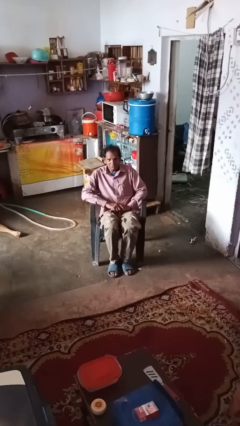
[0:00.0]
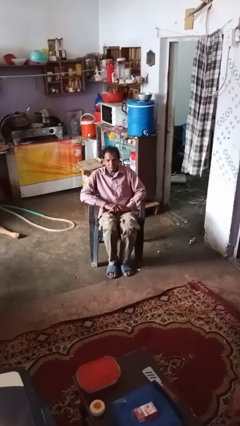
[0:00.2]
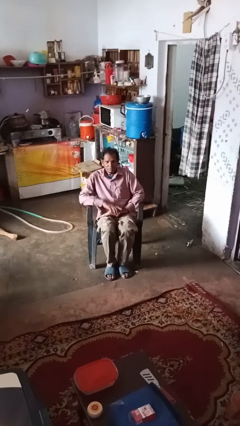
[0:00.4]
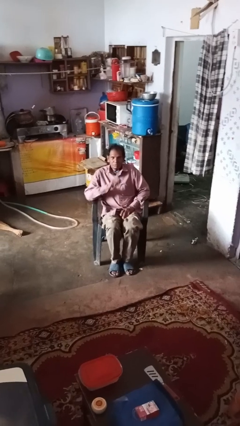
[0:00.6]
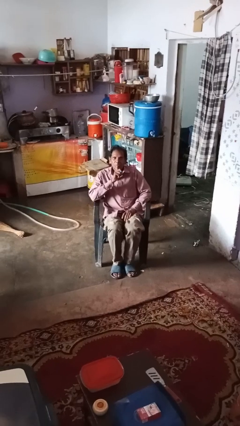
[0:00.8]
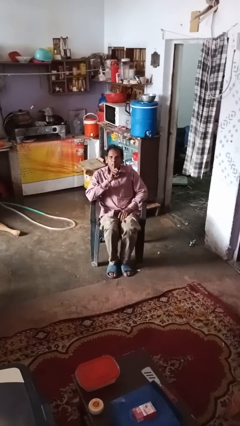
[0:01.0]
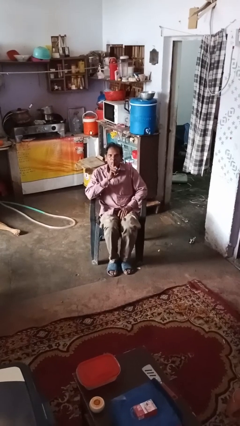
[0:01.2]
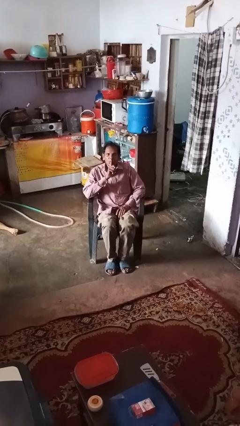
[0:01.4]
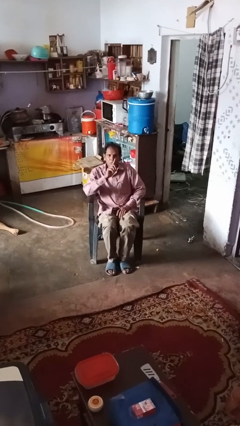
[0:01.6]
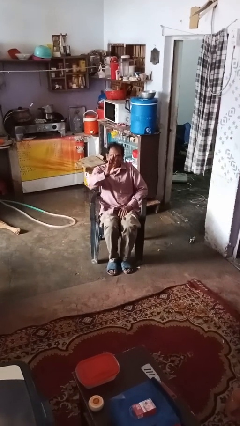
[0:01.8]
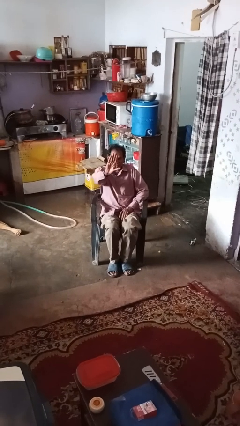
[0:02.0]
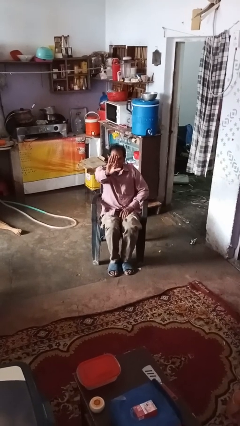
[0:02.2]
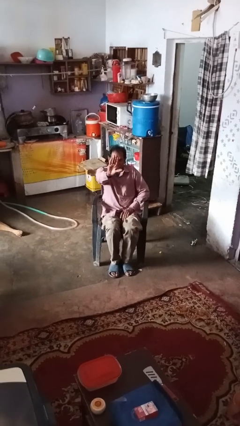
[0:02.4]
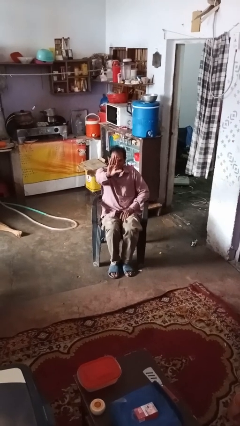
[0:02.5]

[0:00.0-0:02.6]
person gestures be quiet

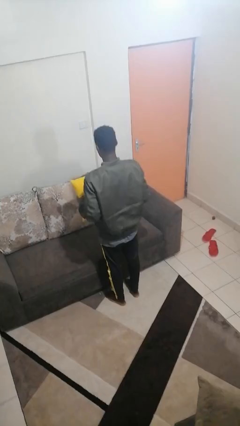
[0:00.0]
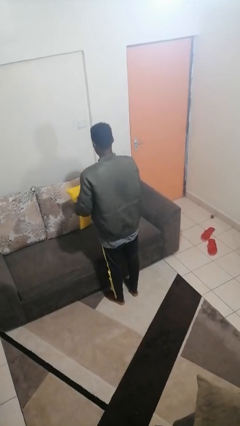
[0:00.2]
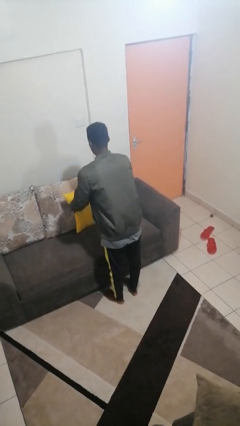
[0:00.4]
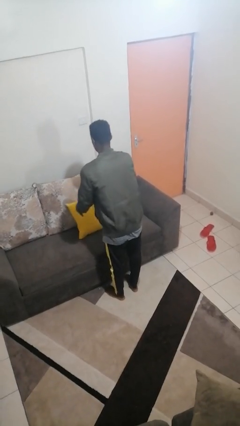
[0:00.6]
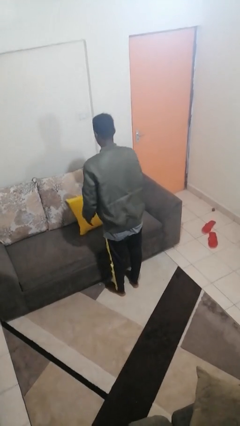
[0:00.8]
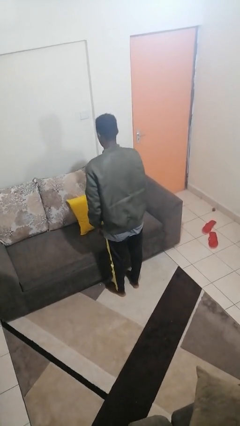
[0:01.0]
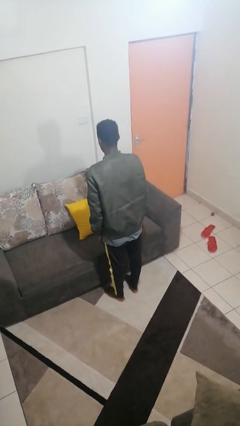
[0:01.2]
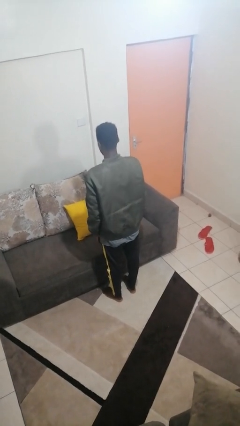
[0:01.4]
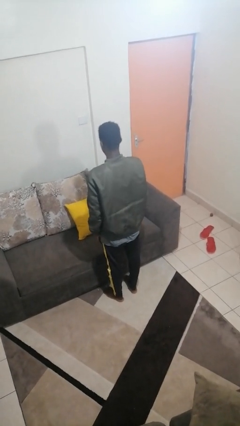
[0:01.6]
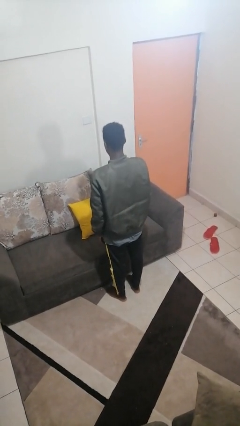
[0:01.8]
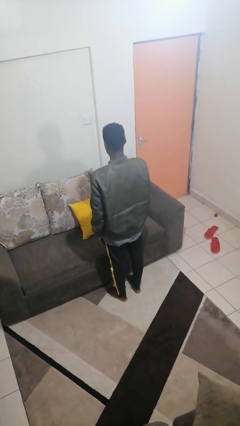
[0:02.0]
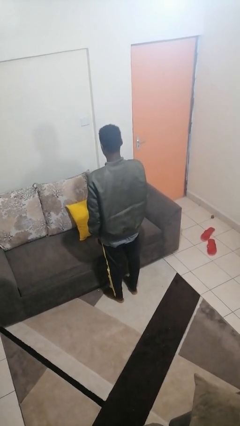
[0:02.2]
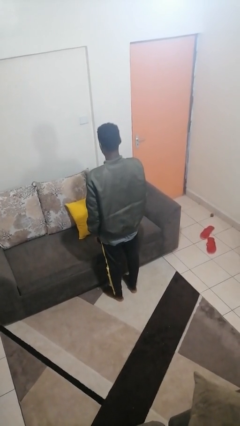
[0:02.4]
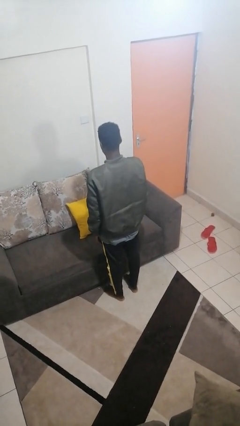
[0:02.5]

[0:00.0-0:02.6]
person puts down object on couch

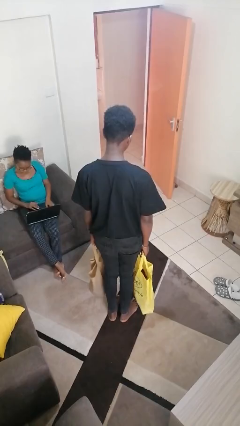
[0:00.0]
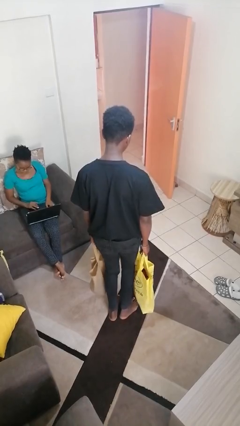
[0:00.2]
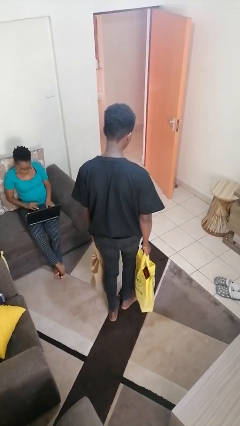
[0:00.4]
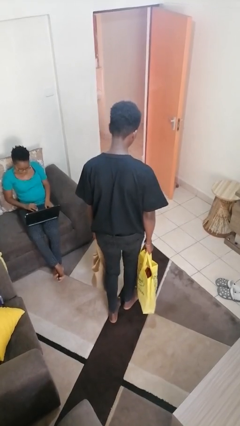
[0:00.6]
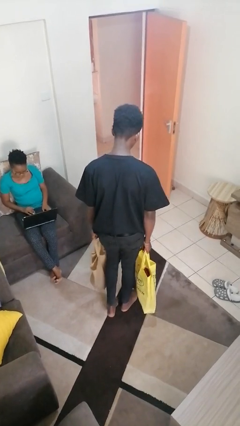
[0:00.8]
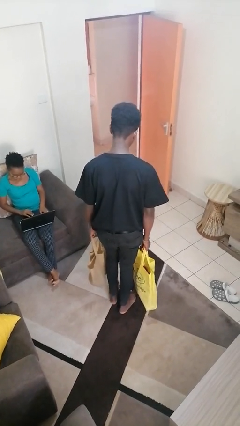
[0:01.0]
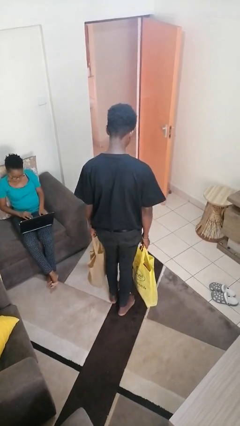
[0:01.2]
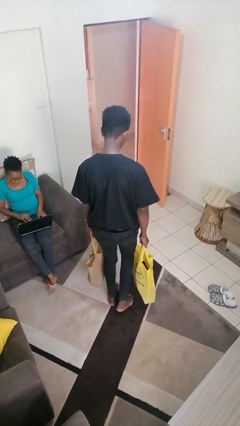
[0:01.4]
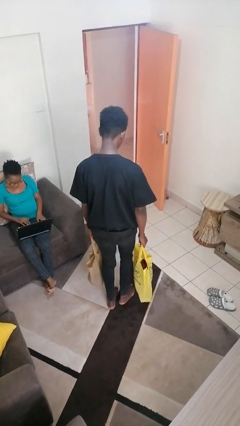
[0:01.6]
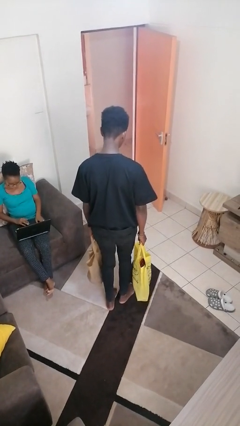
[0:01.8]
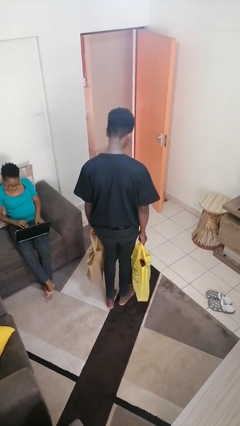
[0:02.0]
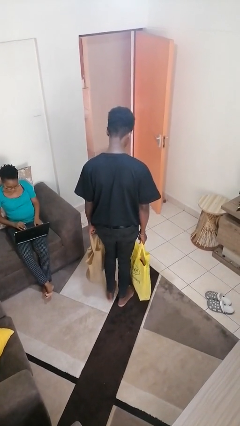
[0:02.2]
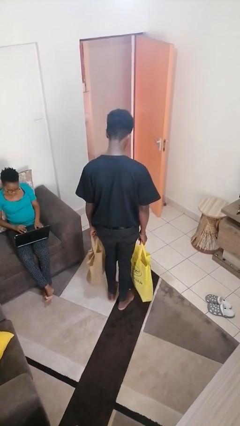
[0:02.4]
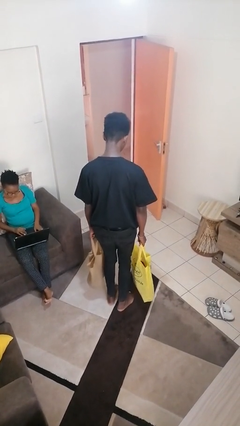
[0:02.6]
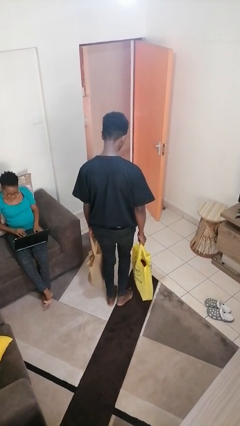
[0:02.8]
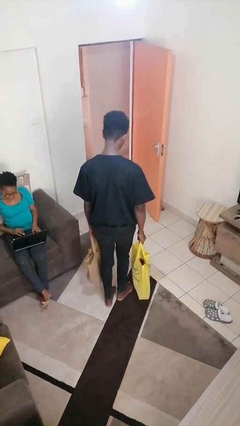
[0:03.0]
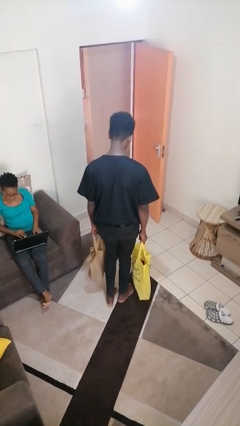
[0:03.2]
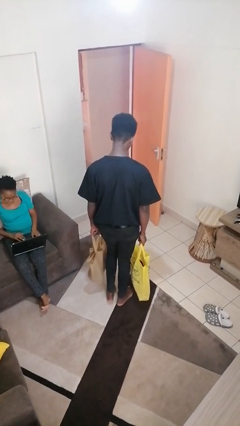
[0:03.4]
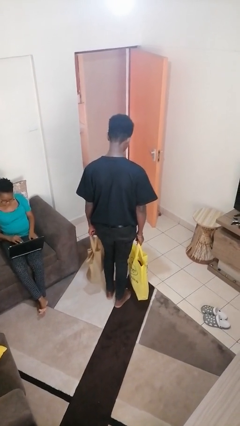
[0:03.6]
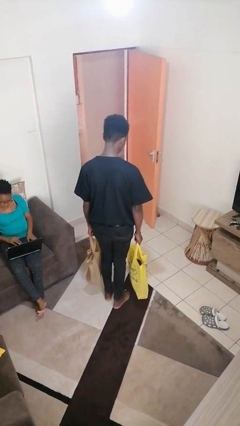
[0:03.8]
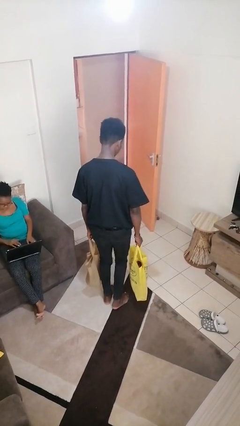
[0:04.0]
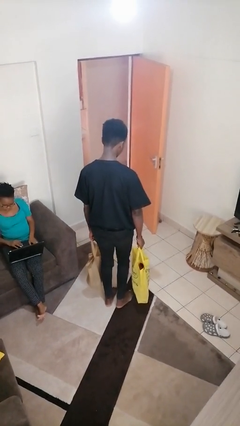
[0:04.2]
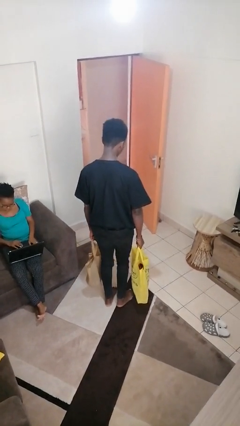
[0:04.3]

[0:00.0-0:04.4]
person carries groceries

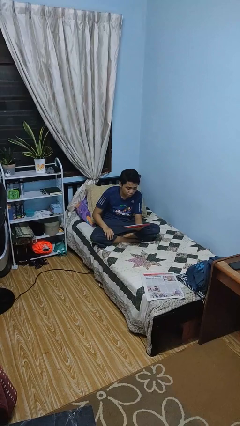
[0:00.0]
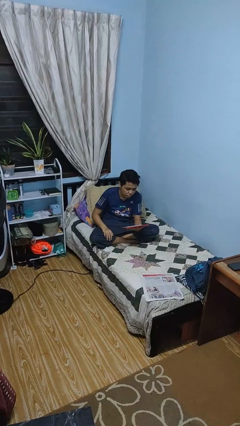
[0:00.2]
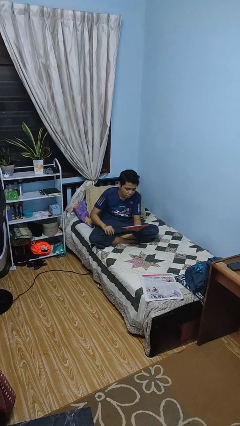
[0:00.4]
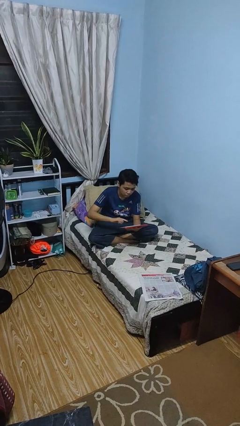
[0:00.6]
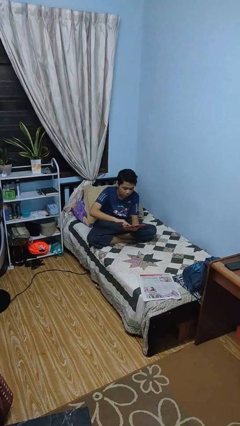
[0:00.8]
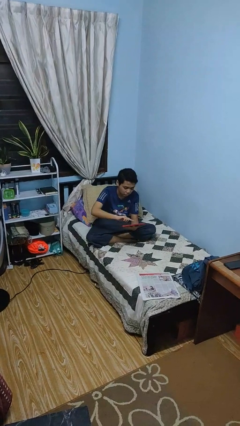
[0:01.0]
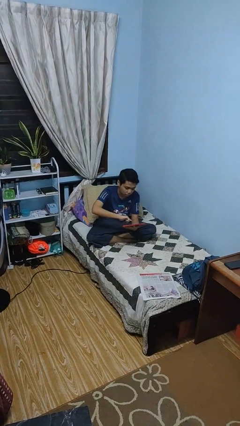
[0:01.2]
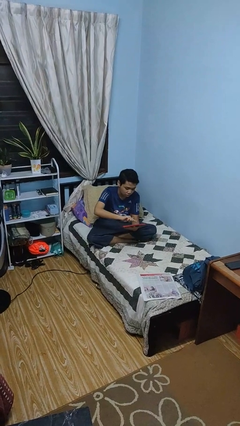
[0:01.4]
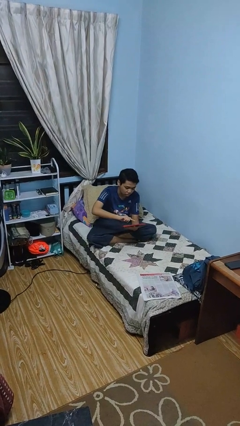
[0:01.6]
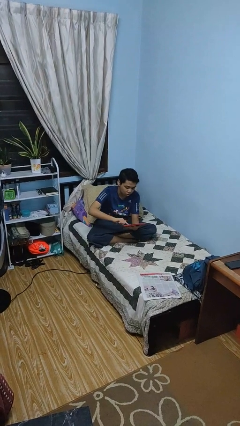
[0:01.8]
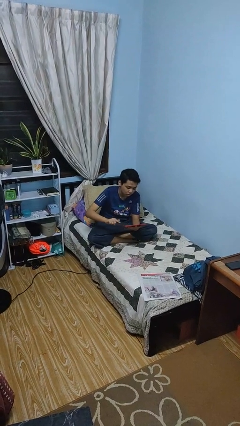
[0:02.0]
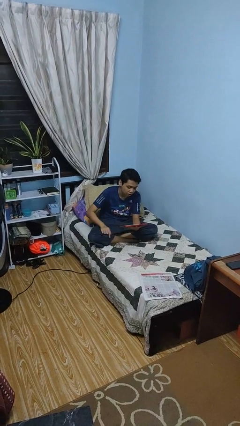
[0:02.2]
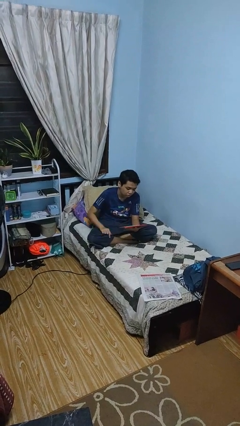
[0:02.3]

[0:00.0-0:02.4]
person interacts with tablet

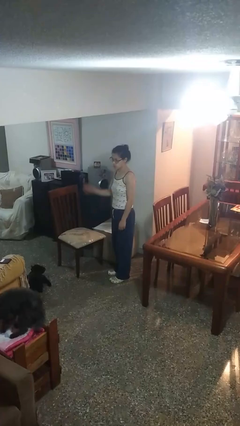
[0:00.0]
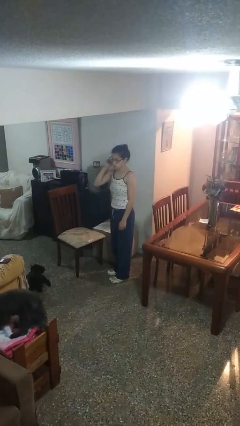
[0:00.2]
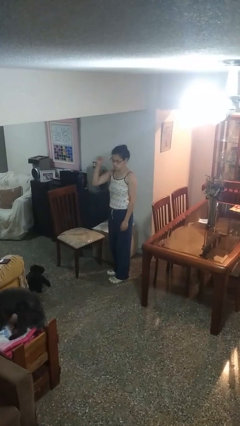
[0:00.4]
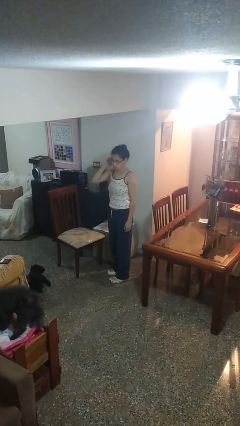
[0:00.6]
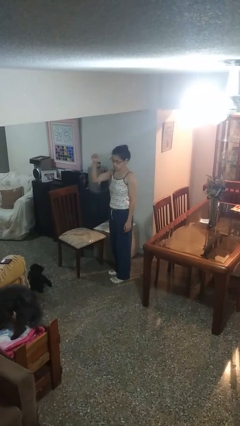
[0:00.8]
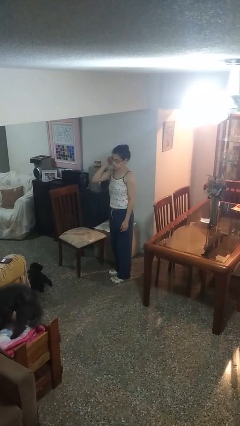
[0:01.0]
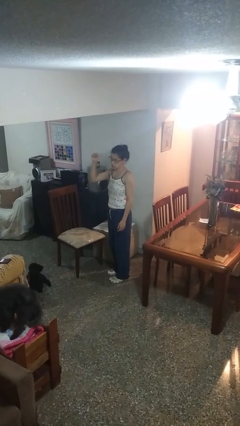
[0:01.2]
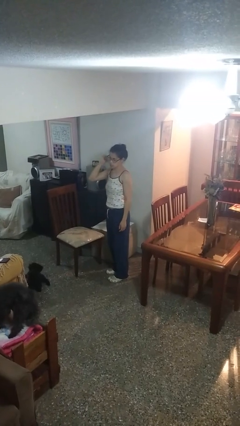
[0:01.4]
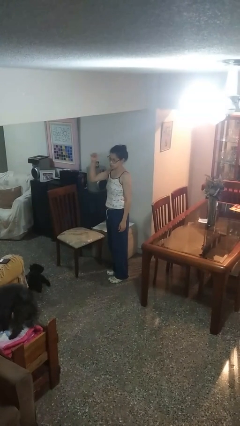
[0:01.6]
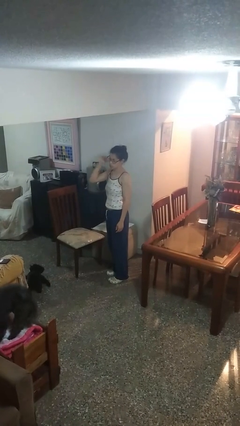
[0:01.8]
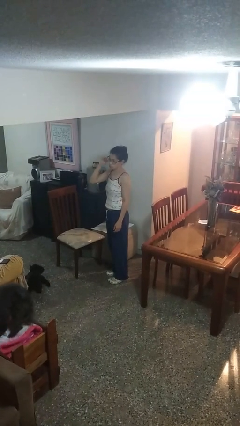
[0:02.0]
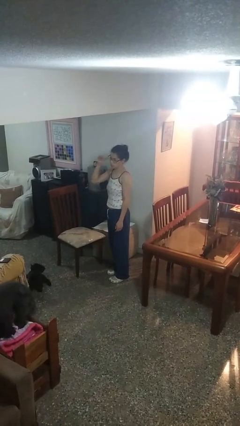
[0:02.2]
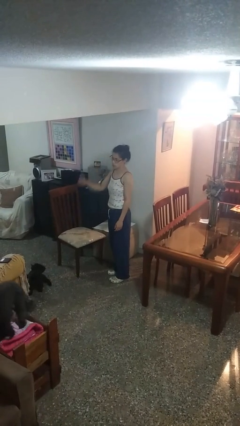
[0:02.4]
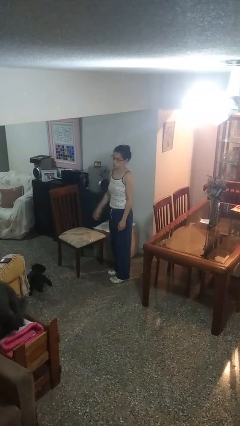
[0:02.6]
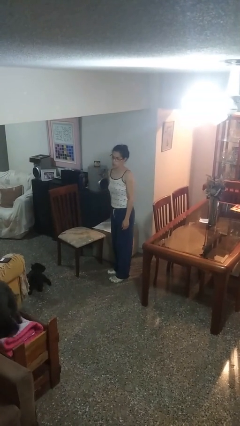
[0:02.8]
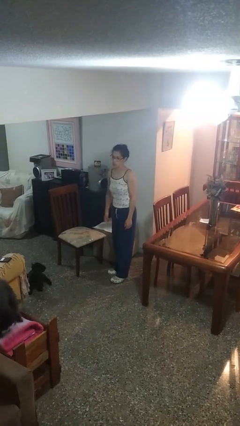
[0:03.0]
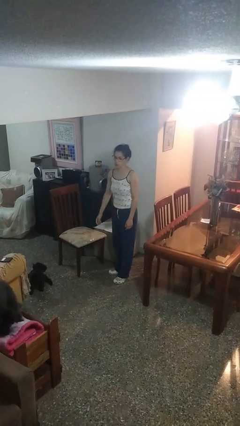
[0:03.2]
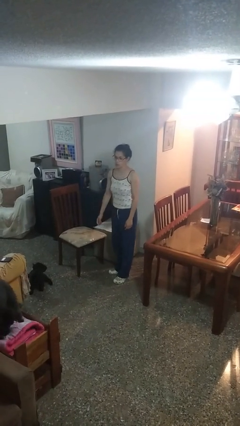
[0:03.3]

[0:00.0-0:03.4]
person gestures behind me

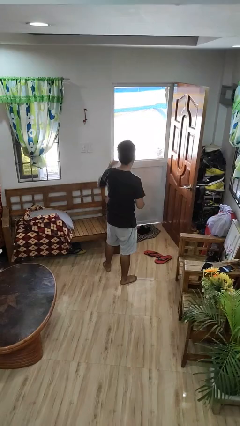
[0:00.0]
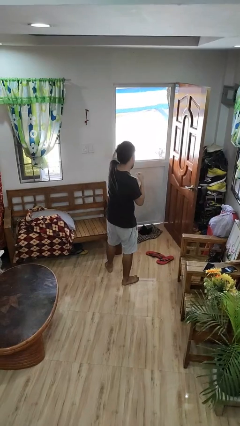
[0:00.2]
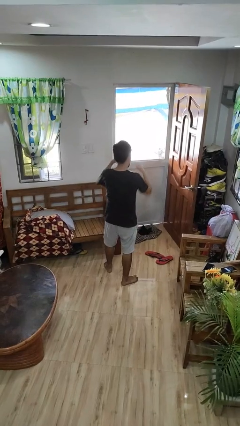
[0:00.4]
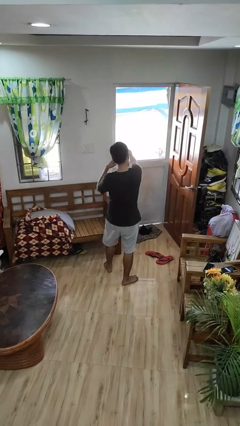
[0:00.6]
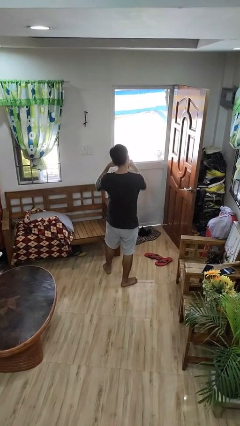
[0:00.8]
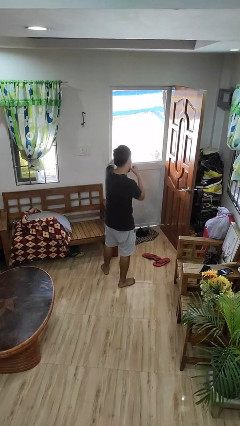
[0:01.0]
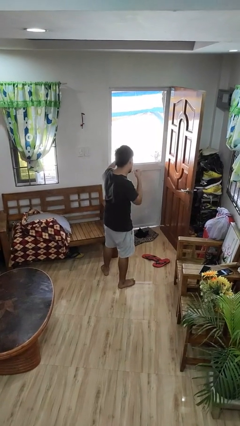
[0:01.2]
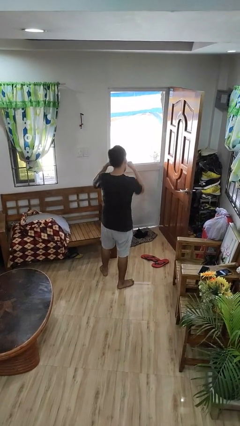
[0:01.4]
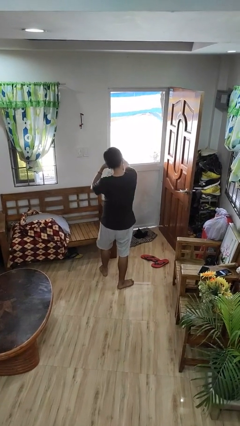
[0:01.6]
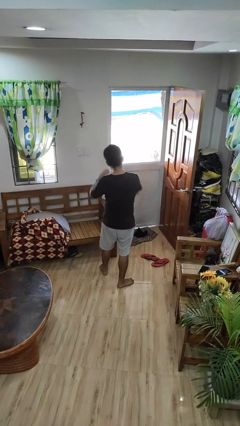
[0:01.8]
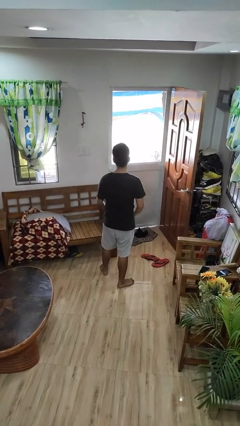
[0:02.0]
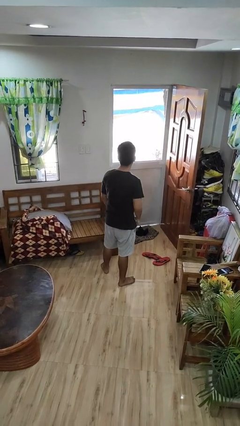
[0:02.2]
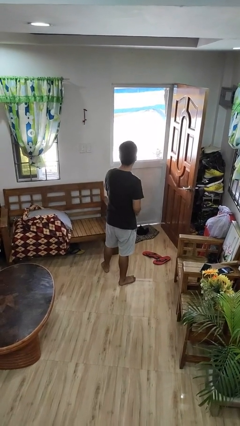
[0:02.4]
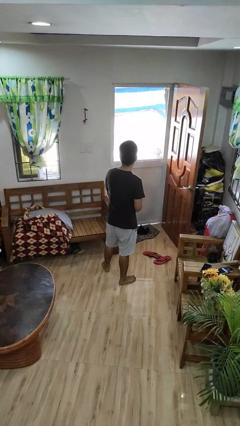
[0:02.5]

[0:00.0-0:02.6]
person punches
